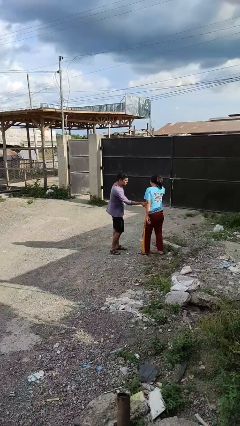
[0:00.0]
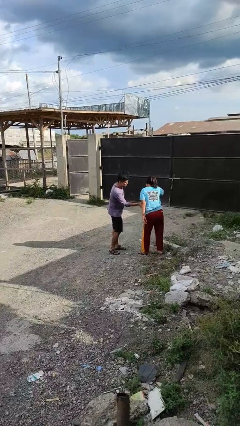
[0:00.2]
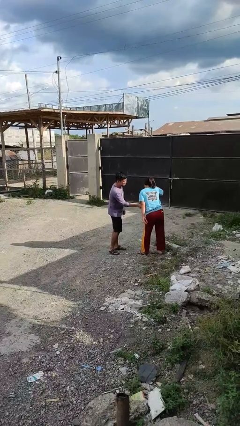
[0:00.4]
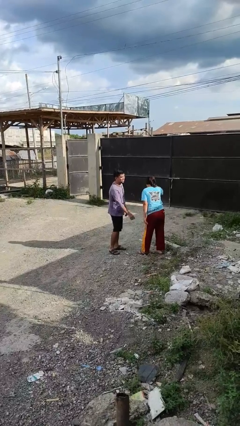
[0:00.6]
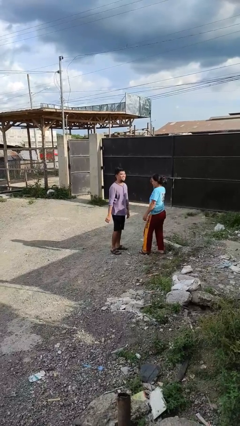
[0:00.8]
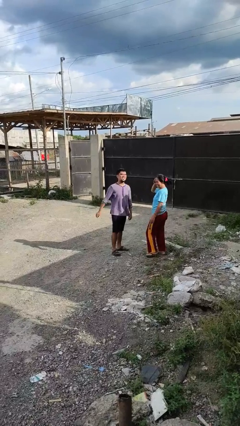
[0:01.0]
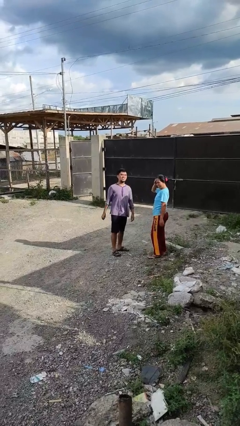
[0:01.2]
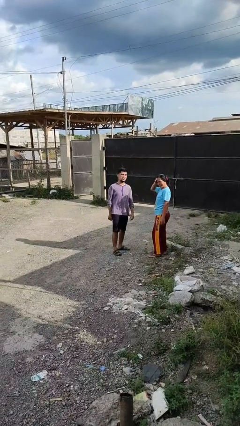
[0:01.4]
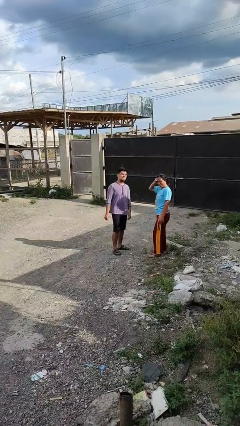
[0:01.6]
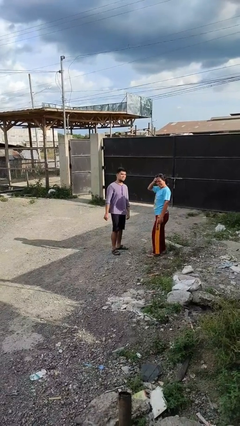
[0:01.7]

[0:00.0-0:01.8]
person tickles person

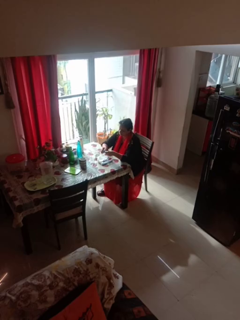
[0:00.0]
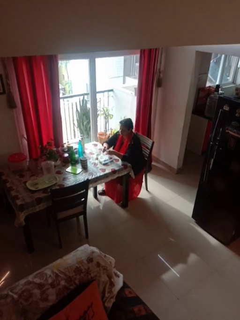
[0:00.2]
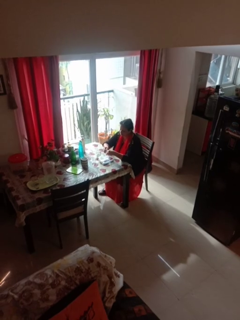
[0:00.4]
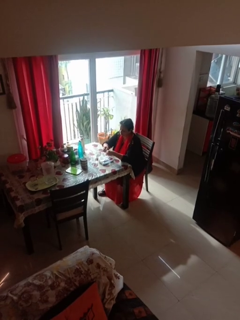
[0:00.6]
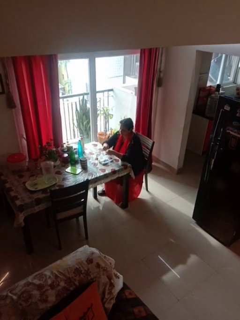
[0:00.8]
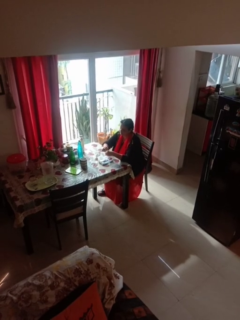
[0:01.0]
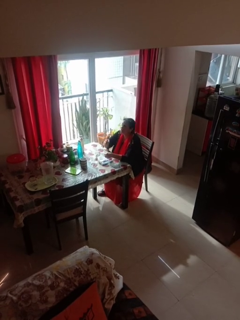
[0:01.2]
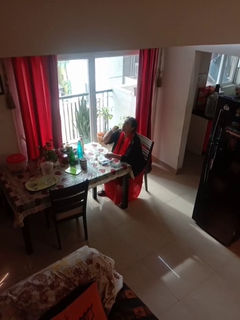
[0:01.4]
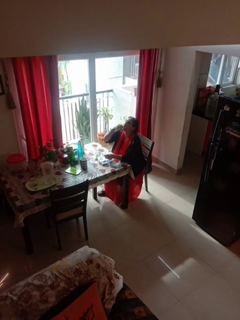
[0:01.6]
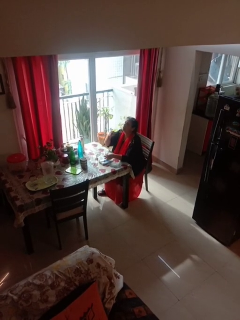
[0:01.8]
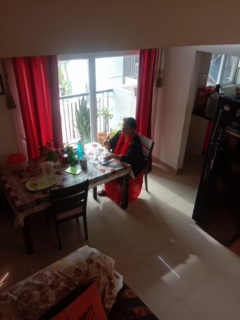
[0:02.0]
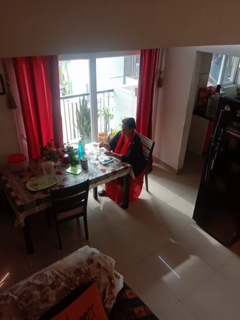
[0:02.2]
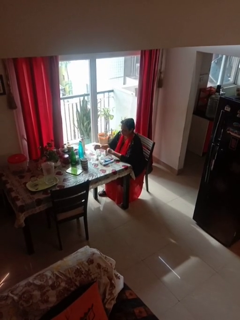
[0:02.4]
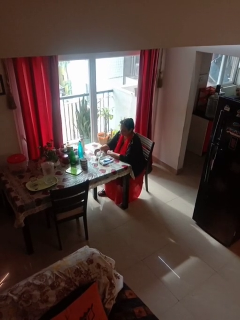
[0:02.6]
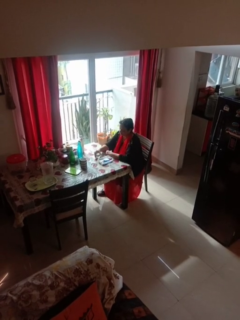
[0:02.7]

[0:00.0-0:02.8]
person takes medicine pills

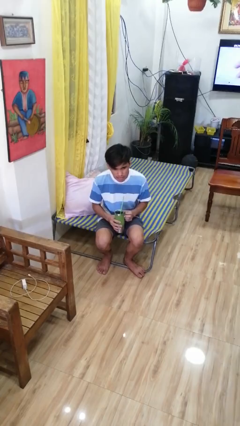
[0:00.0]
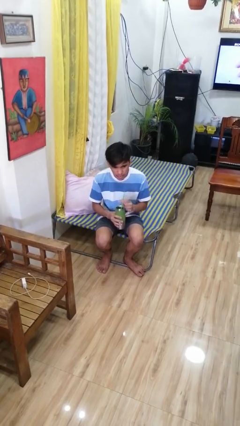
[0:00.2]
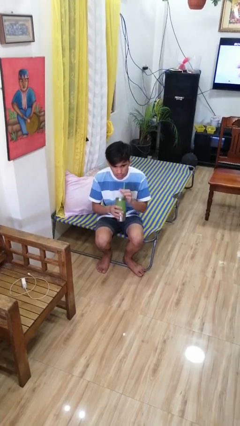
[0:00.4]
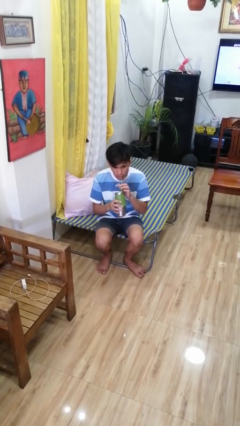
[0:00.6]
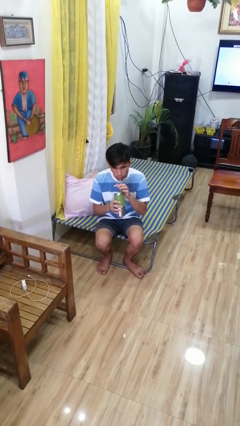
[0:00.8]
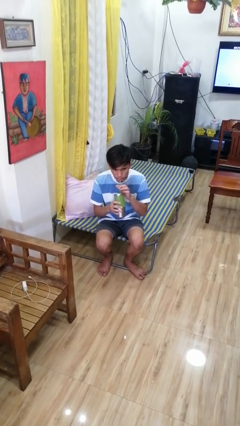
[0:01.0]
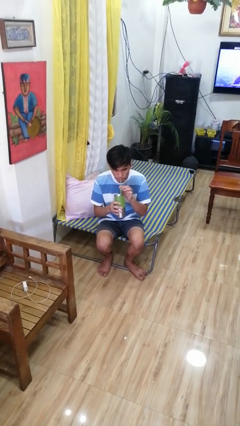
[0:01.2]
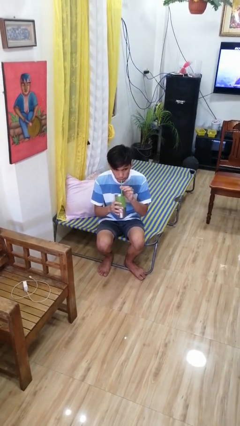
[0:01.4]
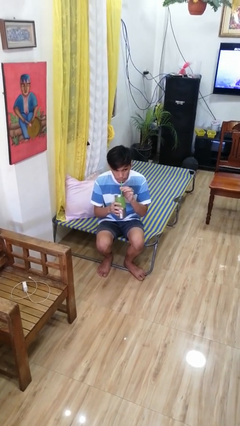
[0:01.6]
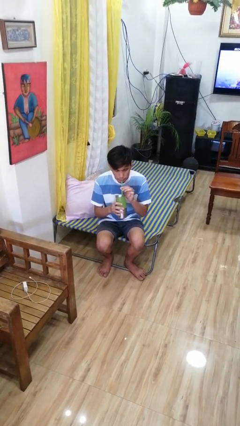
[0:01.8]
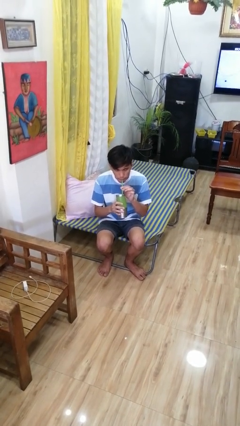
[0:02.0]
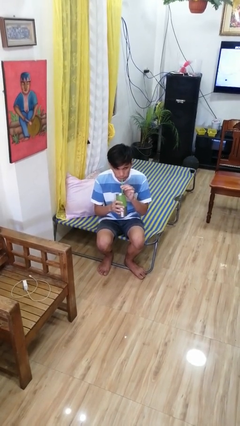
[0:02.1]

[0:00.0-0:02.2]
person drinks from straw

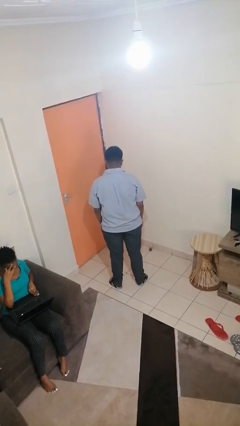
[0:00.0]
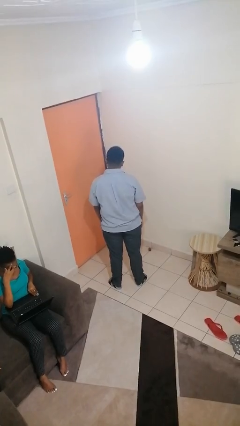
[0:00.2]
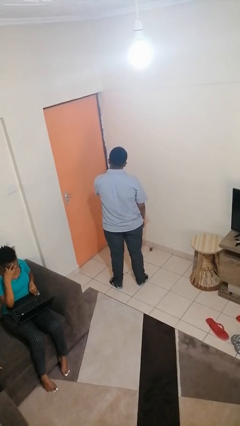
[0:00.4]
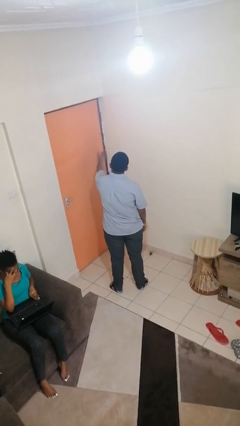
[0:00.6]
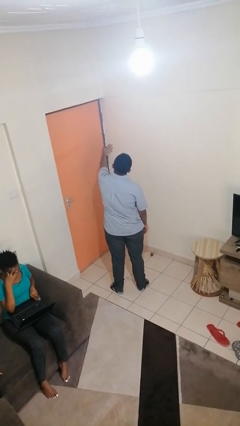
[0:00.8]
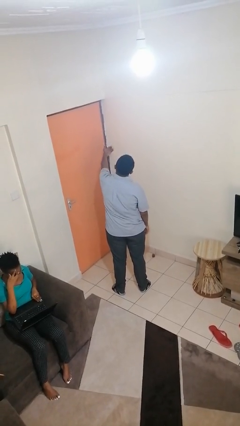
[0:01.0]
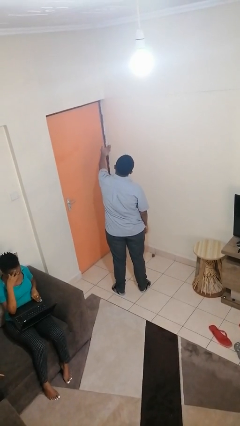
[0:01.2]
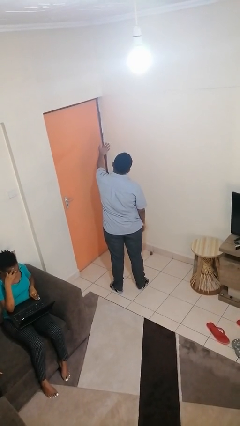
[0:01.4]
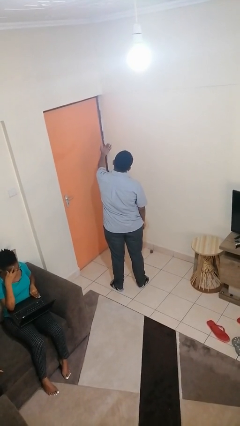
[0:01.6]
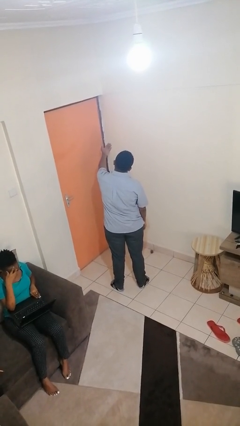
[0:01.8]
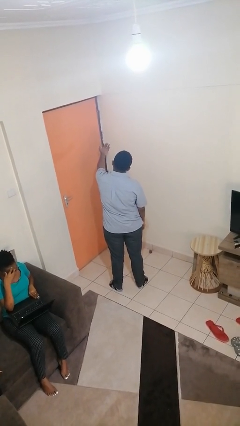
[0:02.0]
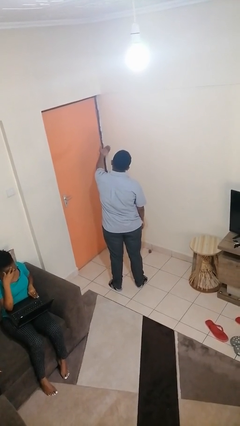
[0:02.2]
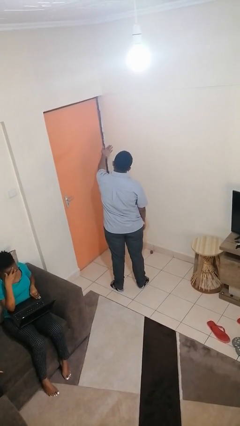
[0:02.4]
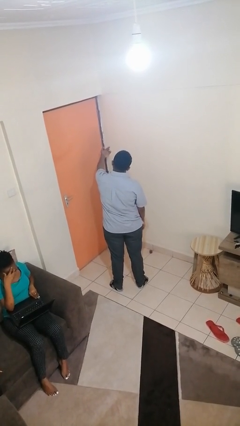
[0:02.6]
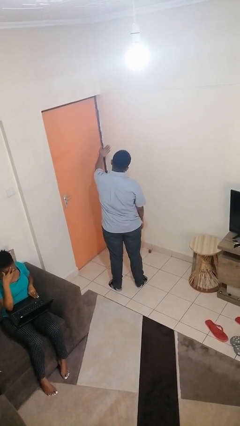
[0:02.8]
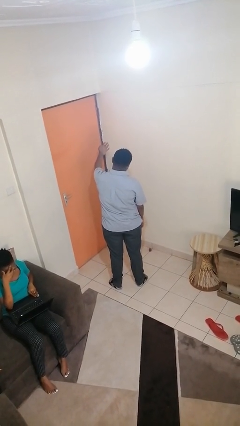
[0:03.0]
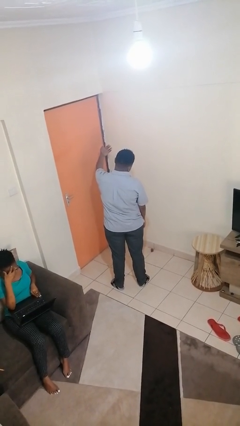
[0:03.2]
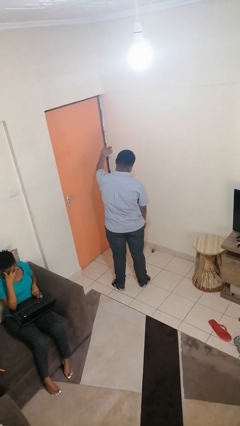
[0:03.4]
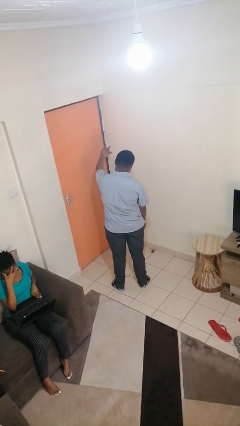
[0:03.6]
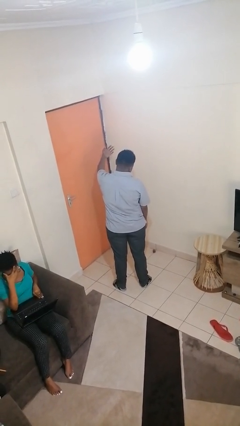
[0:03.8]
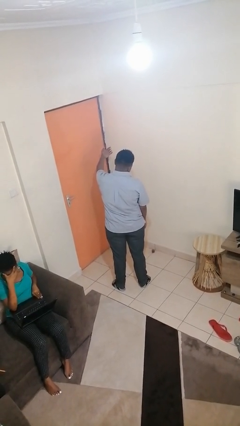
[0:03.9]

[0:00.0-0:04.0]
person gestures come here

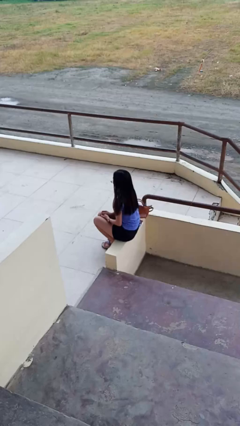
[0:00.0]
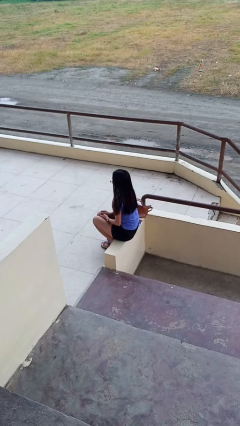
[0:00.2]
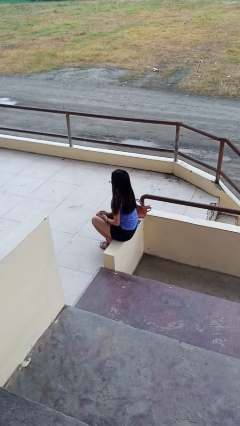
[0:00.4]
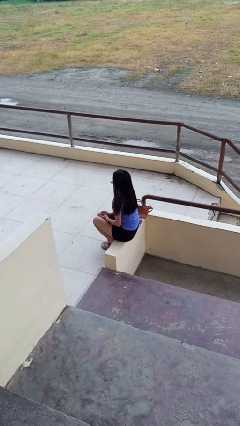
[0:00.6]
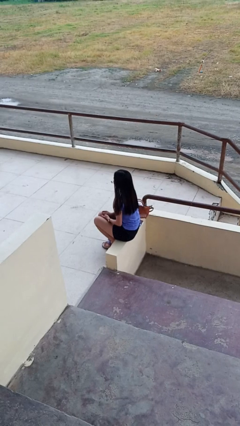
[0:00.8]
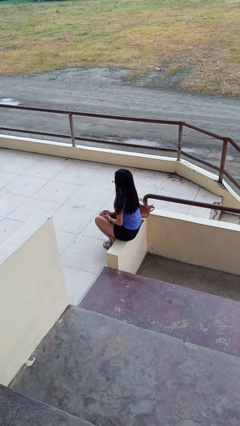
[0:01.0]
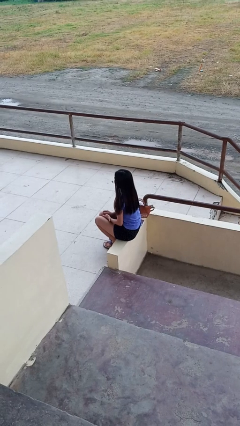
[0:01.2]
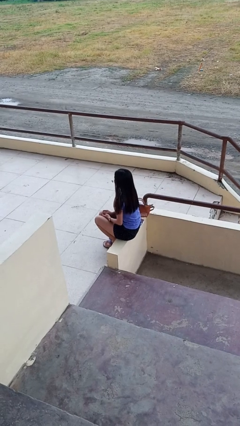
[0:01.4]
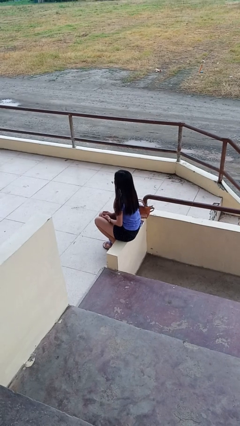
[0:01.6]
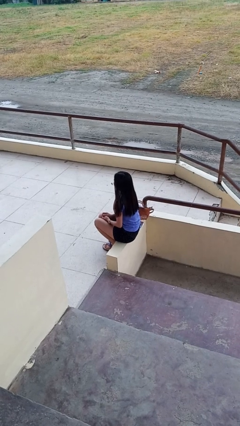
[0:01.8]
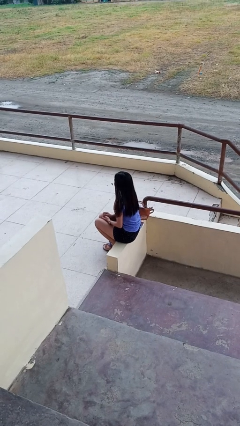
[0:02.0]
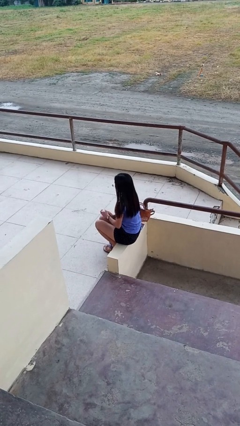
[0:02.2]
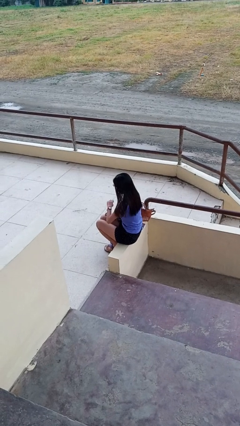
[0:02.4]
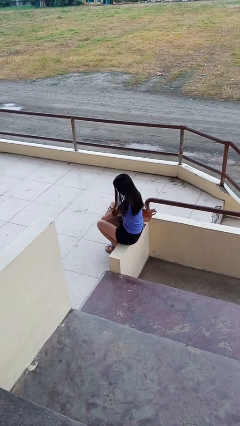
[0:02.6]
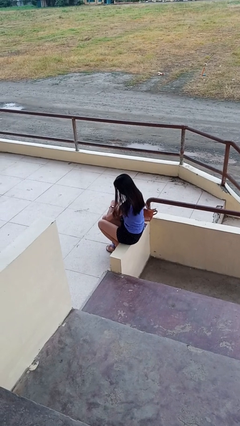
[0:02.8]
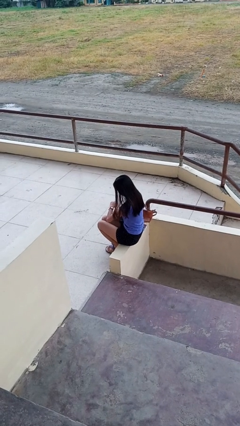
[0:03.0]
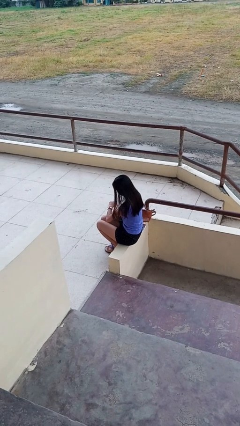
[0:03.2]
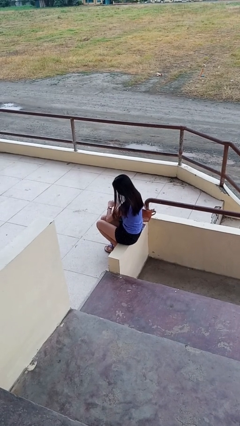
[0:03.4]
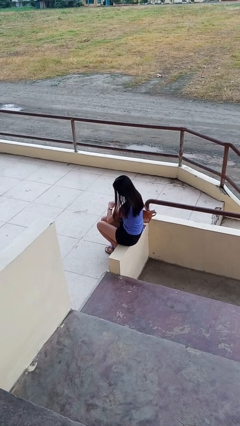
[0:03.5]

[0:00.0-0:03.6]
person looks at wristwatch

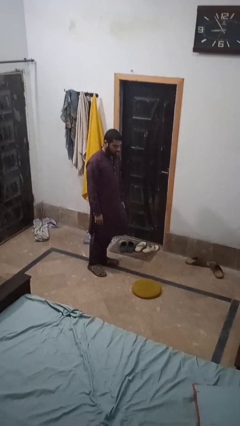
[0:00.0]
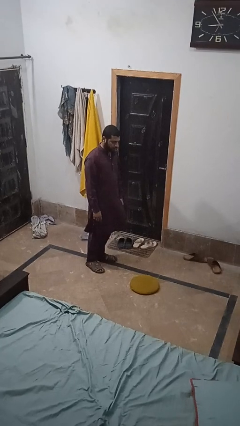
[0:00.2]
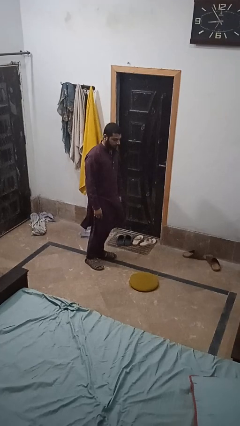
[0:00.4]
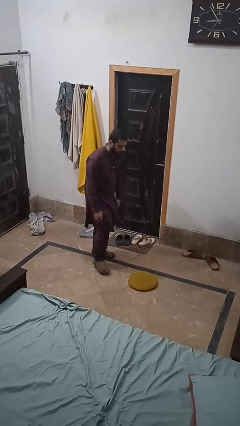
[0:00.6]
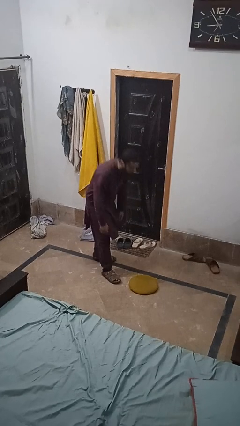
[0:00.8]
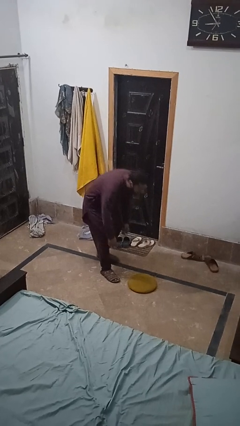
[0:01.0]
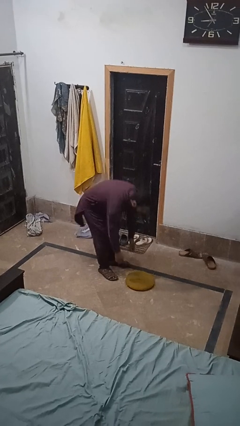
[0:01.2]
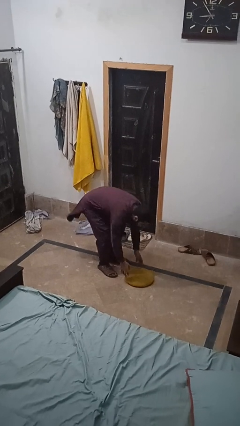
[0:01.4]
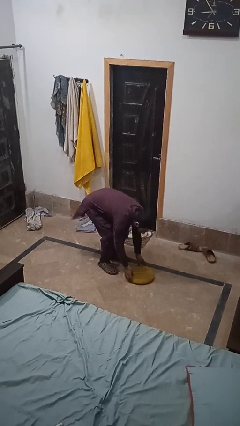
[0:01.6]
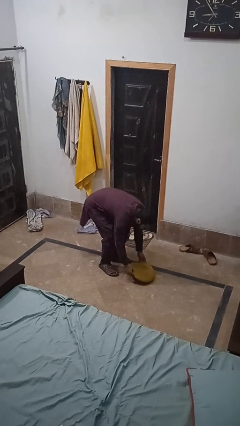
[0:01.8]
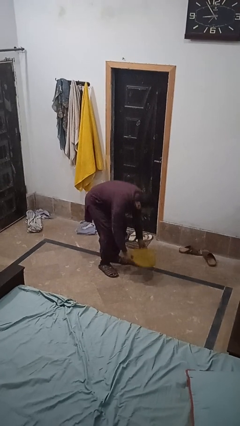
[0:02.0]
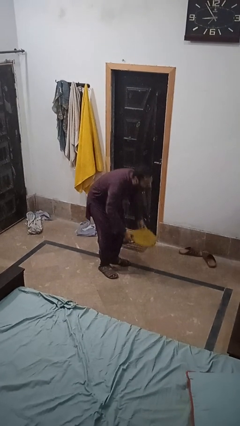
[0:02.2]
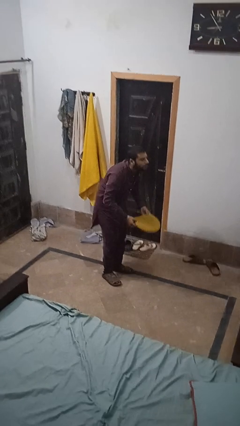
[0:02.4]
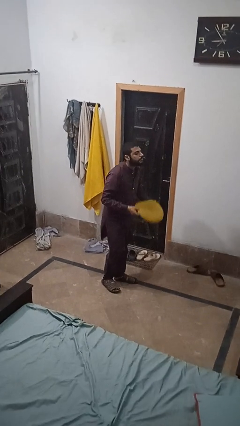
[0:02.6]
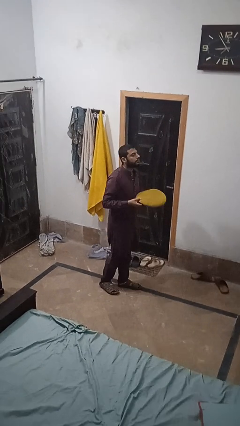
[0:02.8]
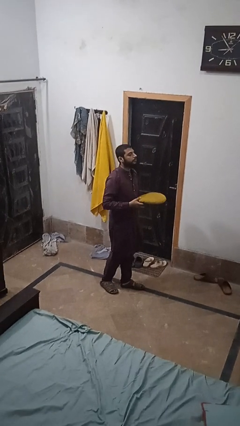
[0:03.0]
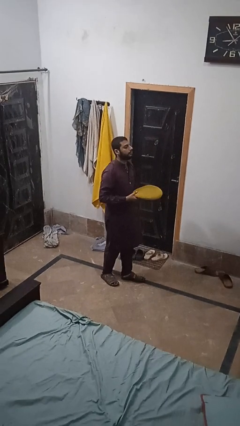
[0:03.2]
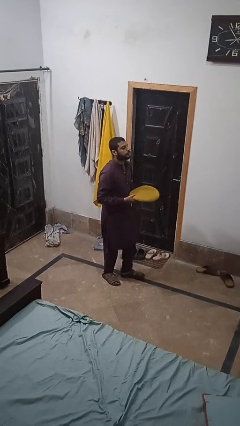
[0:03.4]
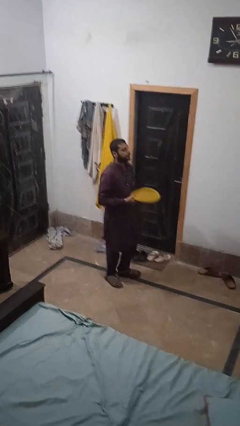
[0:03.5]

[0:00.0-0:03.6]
person picks up object from floor

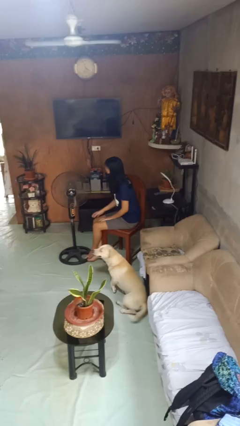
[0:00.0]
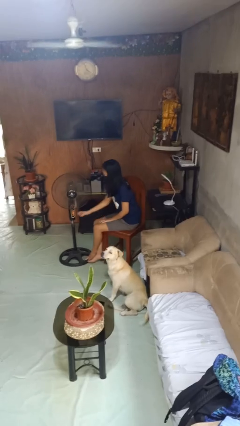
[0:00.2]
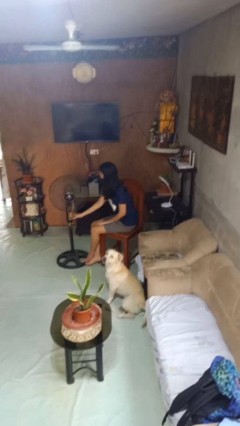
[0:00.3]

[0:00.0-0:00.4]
person turns off fan
